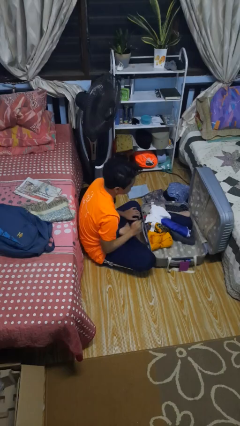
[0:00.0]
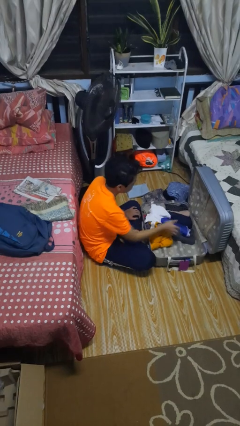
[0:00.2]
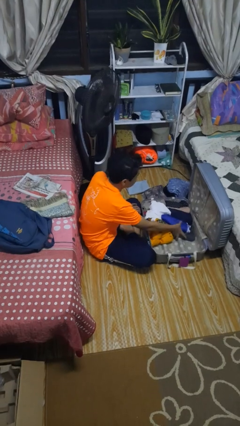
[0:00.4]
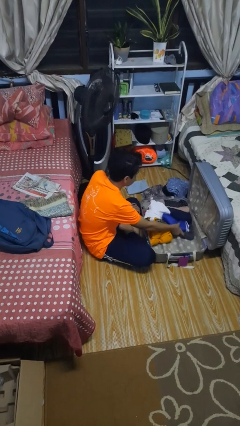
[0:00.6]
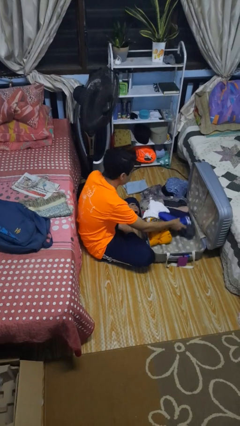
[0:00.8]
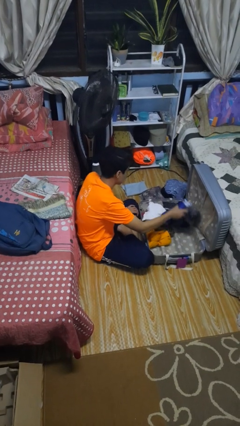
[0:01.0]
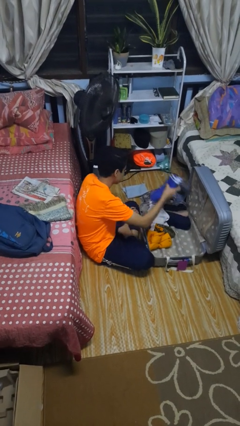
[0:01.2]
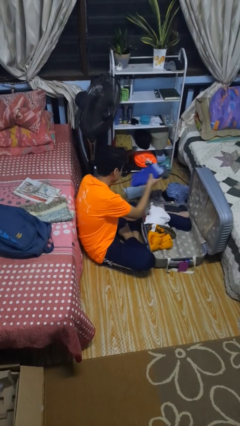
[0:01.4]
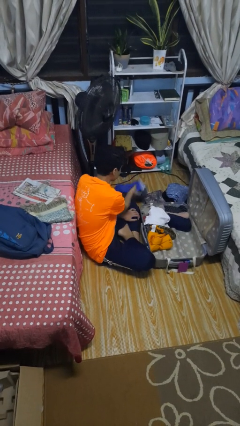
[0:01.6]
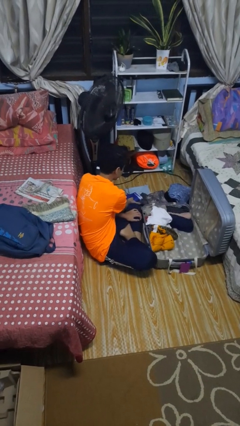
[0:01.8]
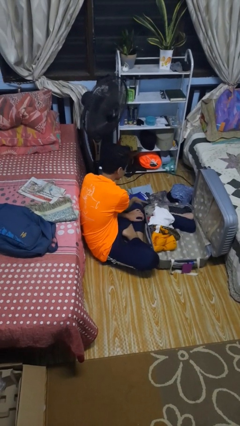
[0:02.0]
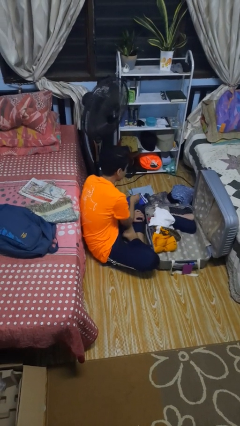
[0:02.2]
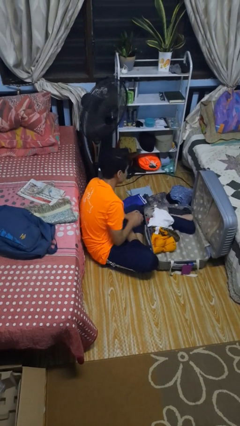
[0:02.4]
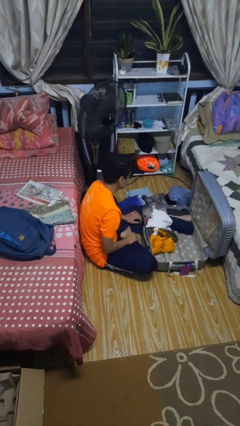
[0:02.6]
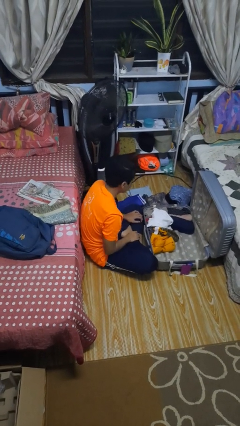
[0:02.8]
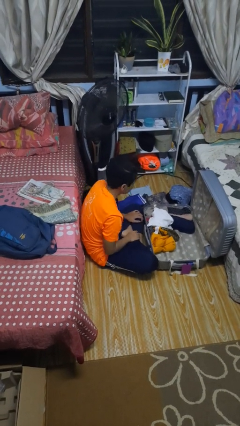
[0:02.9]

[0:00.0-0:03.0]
person unloads clothes from suitcase

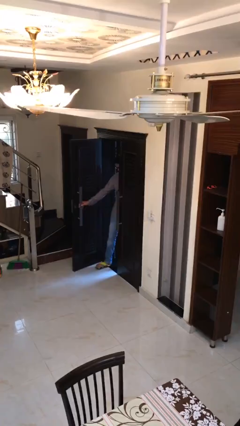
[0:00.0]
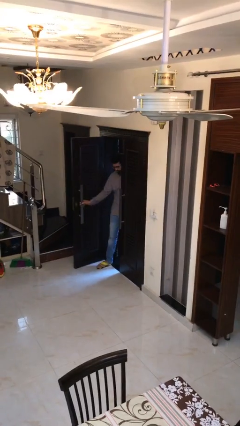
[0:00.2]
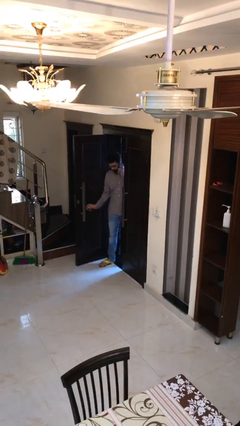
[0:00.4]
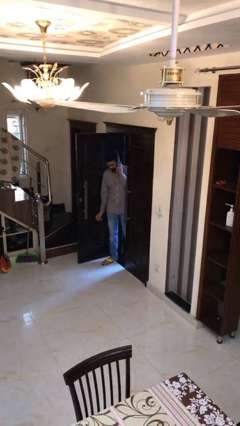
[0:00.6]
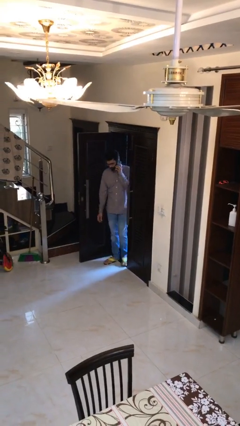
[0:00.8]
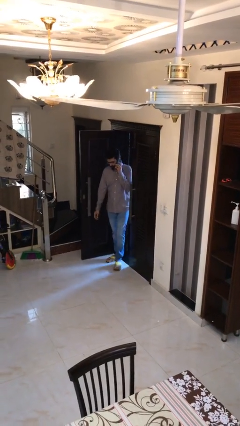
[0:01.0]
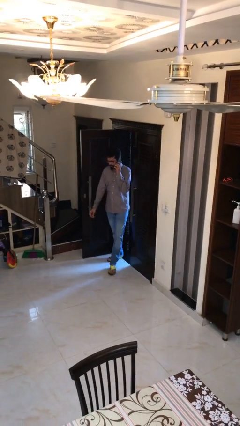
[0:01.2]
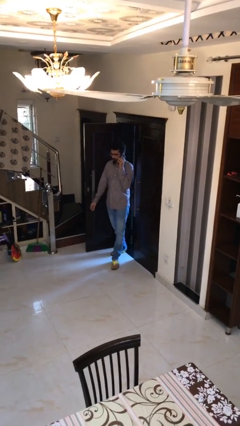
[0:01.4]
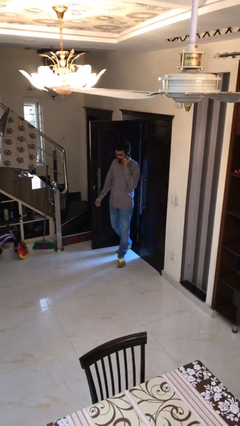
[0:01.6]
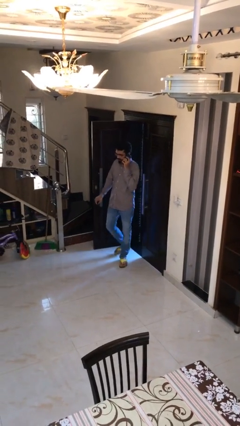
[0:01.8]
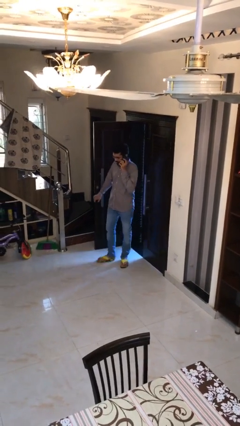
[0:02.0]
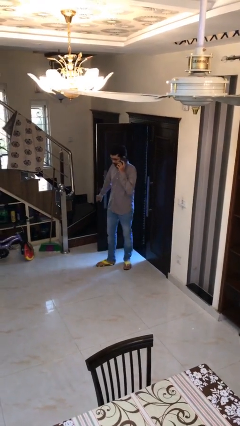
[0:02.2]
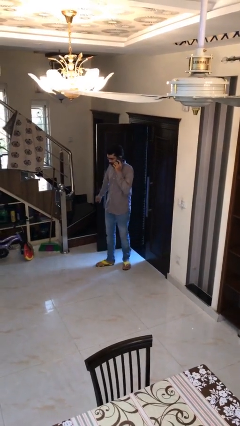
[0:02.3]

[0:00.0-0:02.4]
person enters scene through structure

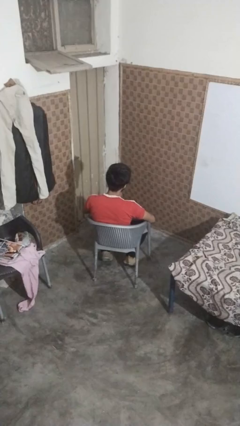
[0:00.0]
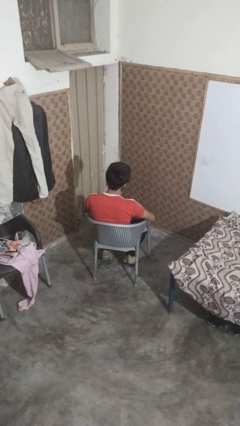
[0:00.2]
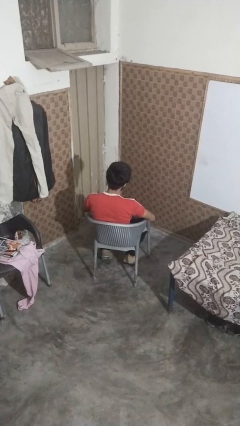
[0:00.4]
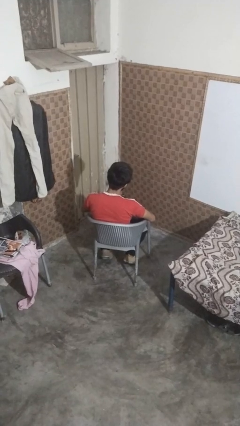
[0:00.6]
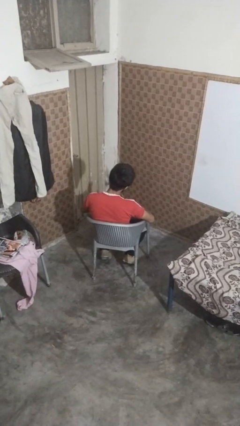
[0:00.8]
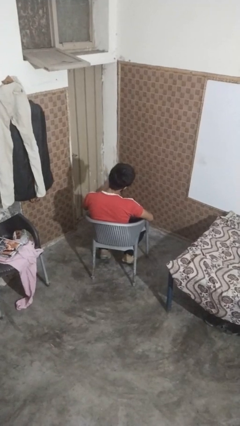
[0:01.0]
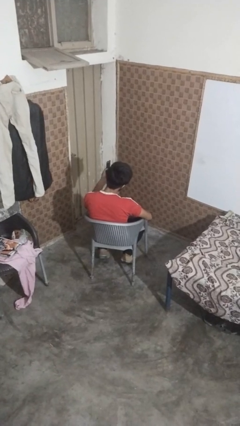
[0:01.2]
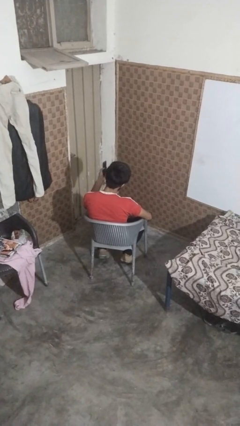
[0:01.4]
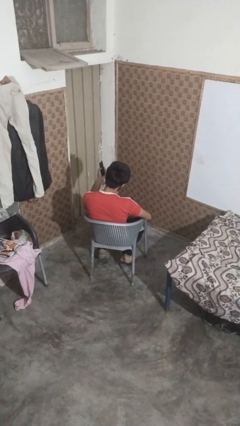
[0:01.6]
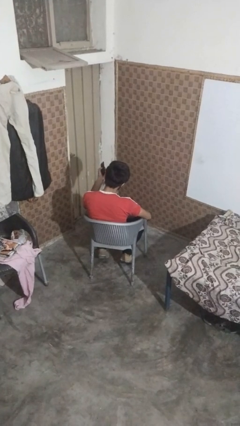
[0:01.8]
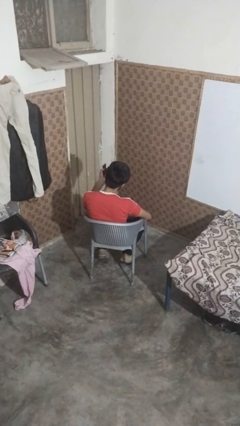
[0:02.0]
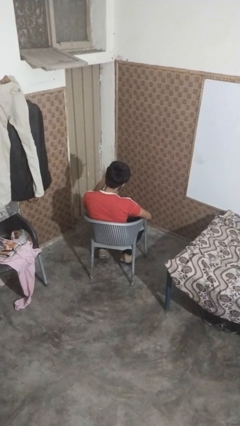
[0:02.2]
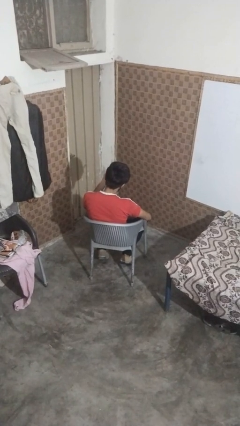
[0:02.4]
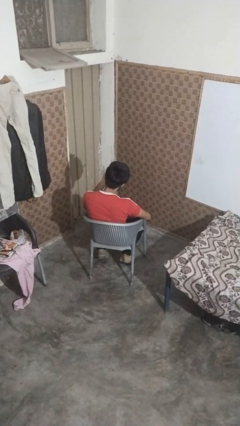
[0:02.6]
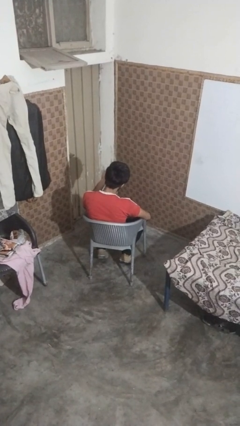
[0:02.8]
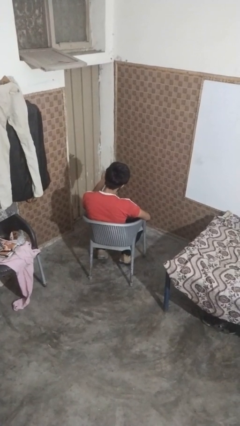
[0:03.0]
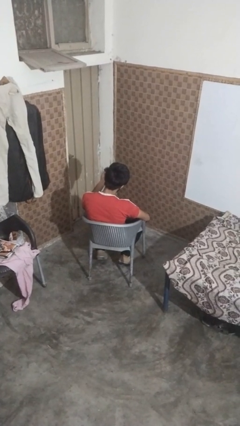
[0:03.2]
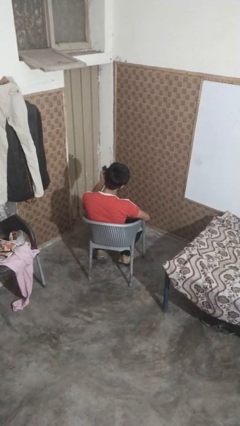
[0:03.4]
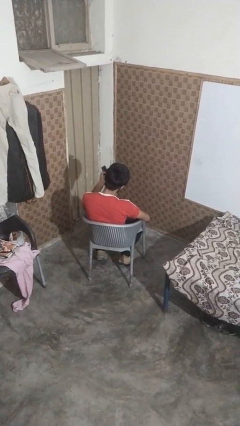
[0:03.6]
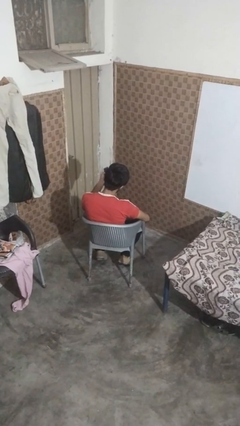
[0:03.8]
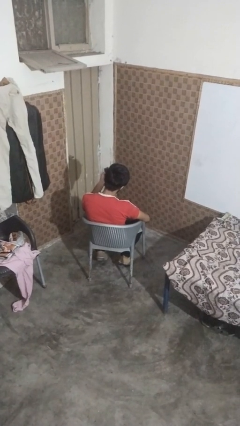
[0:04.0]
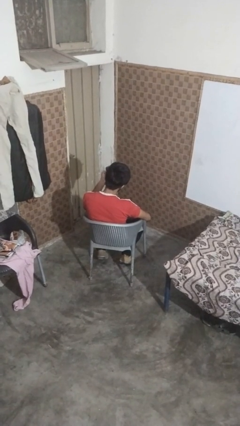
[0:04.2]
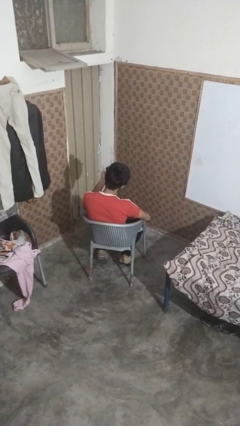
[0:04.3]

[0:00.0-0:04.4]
person uses television remote

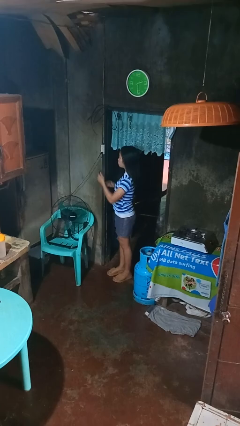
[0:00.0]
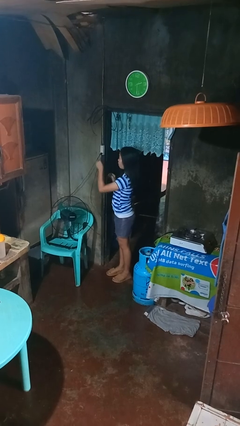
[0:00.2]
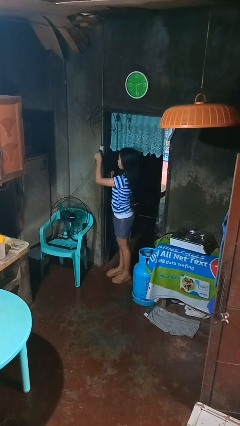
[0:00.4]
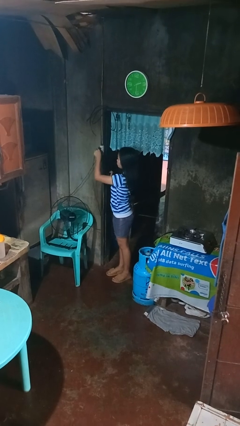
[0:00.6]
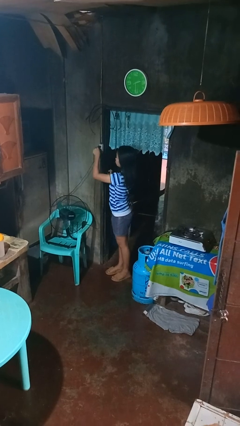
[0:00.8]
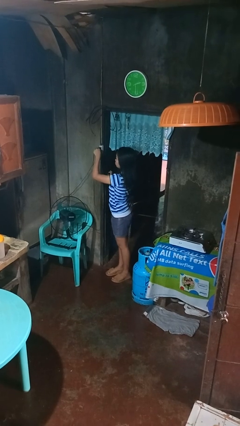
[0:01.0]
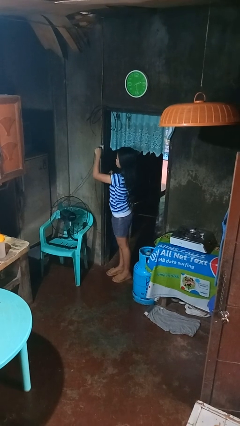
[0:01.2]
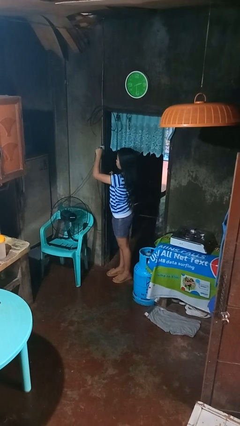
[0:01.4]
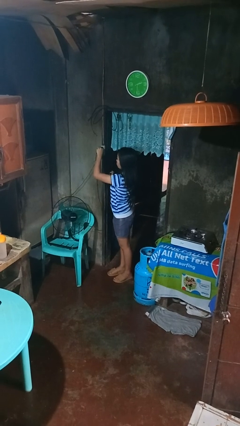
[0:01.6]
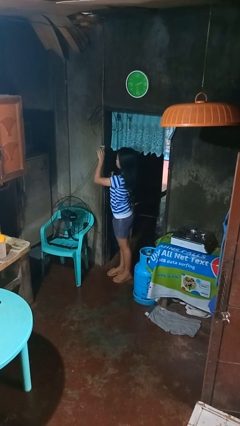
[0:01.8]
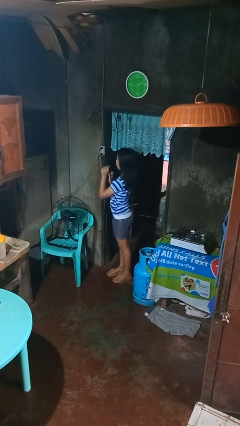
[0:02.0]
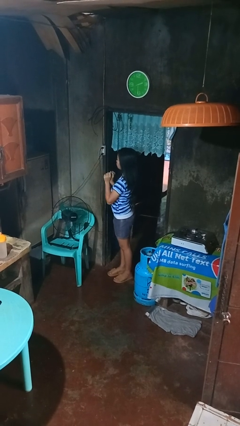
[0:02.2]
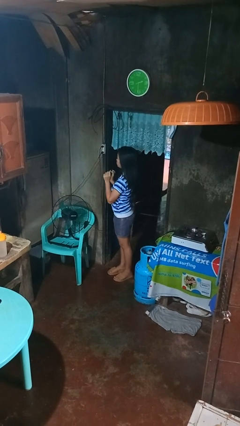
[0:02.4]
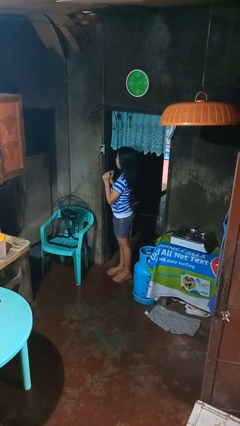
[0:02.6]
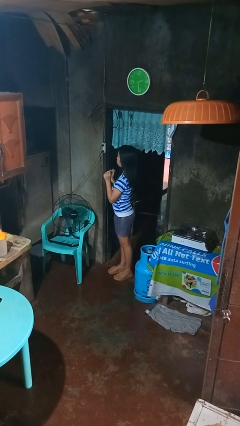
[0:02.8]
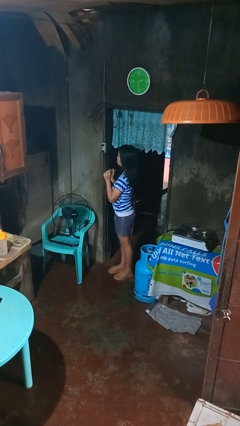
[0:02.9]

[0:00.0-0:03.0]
person plugs into electrical socket

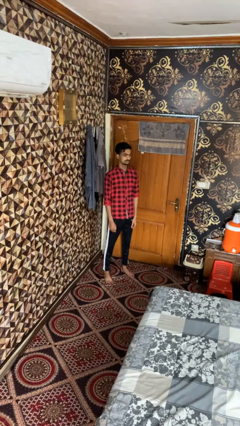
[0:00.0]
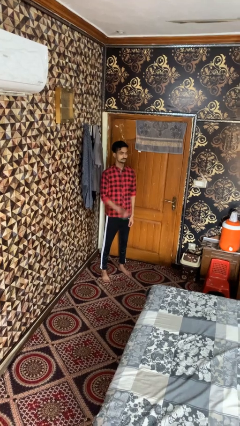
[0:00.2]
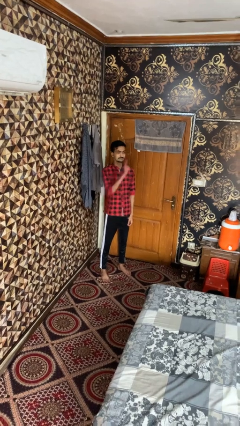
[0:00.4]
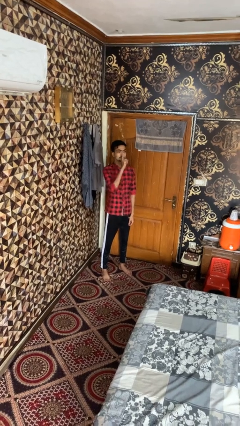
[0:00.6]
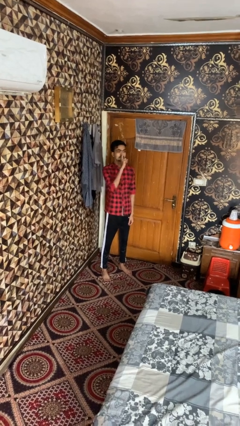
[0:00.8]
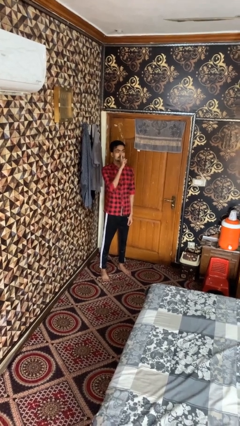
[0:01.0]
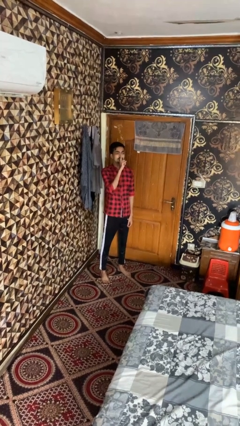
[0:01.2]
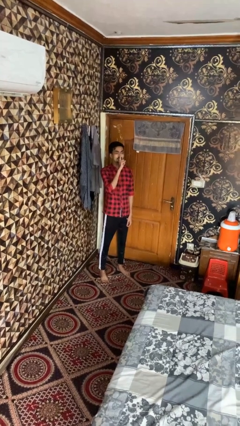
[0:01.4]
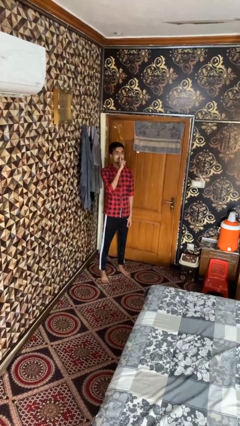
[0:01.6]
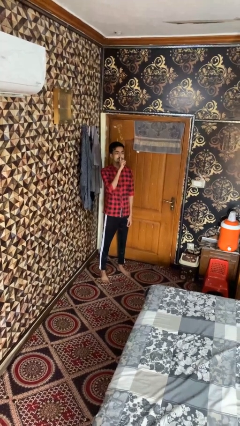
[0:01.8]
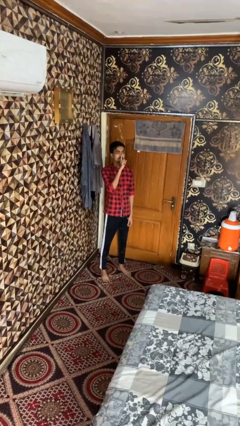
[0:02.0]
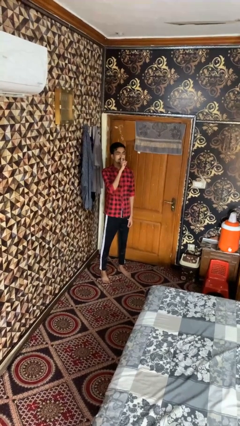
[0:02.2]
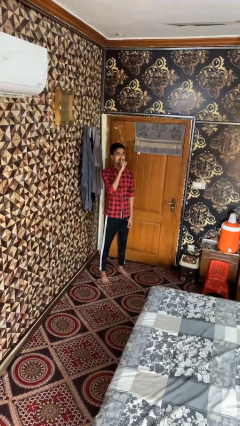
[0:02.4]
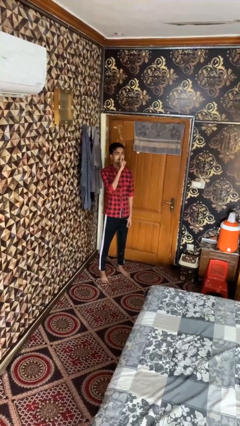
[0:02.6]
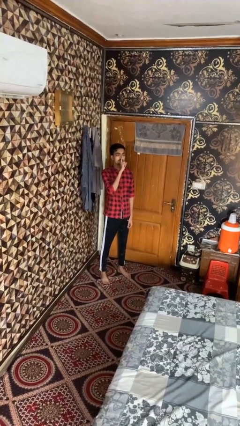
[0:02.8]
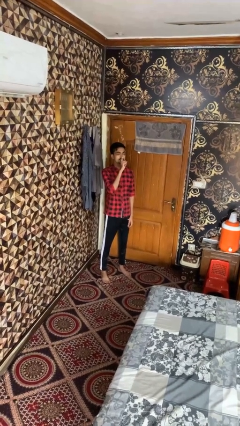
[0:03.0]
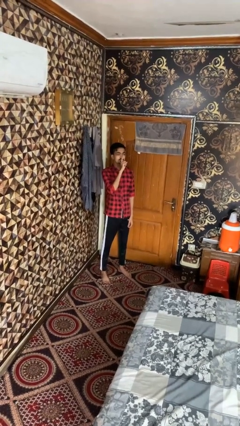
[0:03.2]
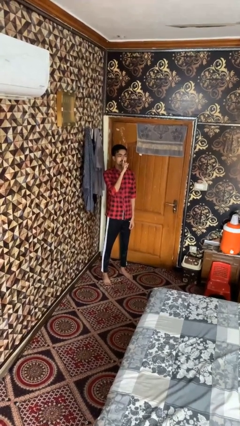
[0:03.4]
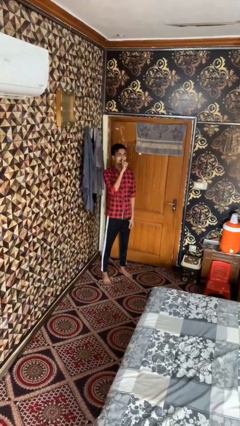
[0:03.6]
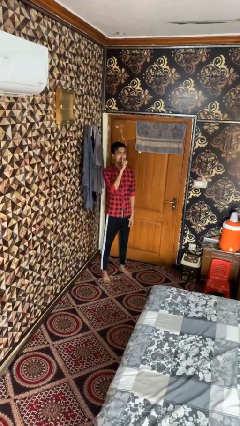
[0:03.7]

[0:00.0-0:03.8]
person gestures be quiet

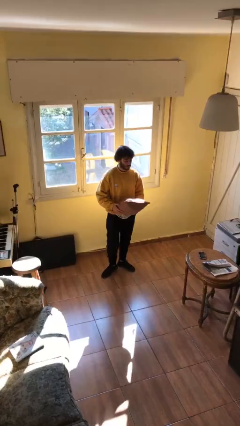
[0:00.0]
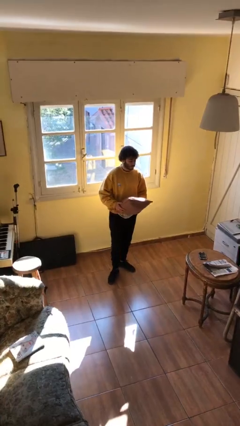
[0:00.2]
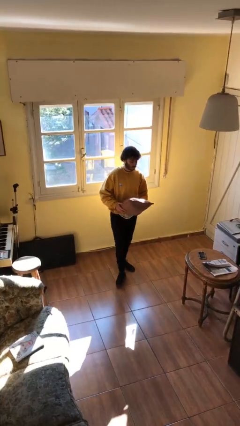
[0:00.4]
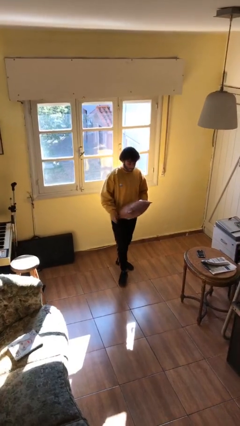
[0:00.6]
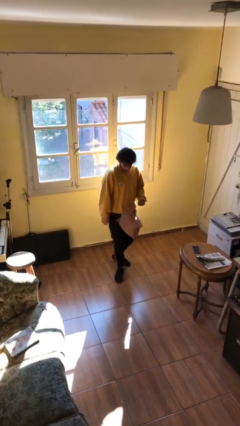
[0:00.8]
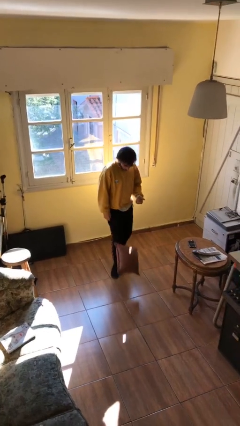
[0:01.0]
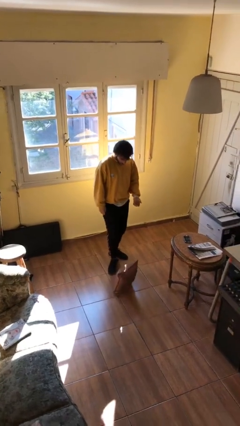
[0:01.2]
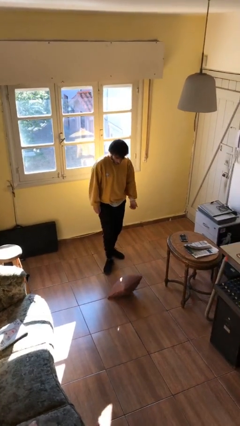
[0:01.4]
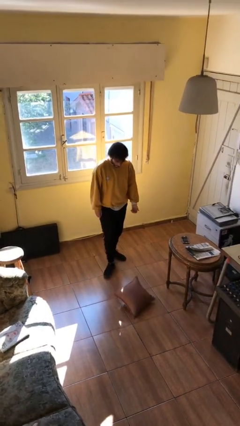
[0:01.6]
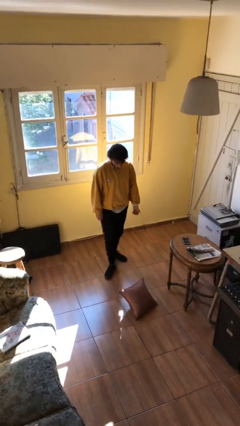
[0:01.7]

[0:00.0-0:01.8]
person drops object
